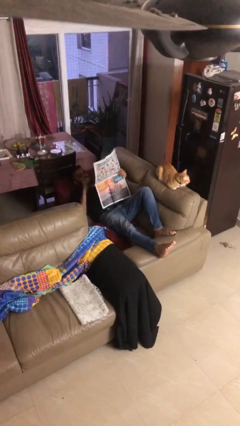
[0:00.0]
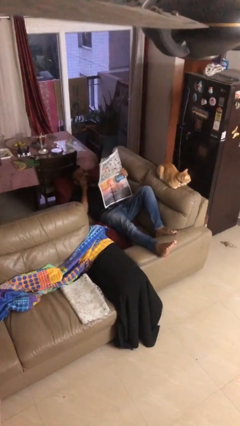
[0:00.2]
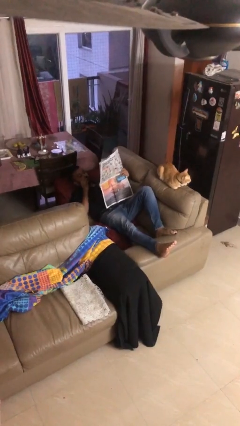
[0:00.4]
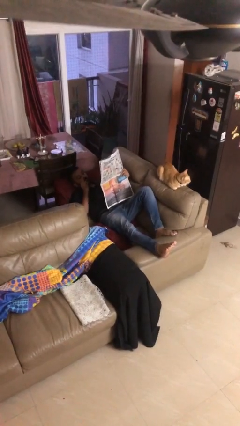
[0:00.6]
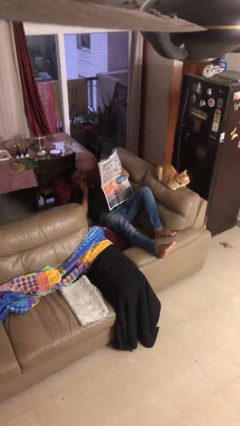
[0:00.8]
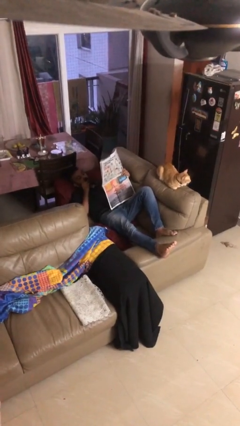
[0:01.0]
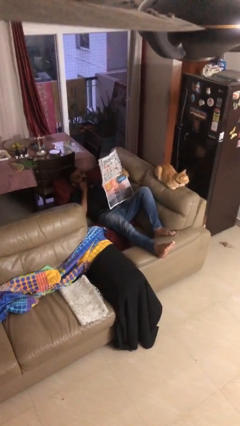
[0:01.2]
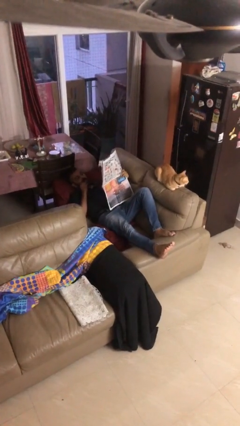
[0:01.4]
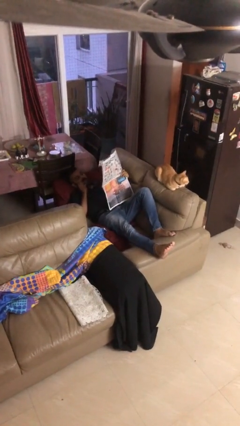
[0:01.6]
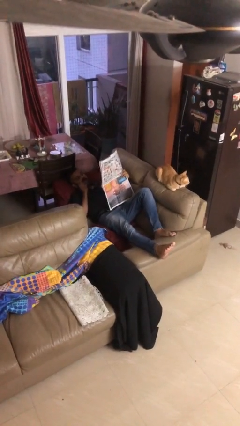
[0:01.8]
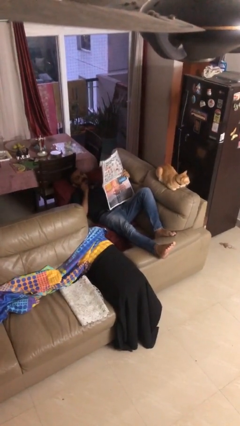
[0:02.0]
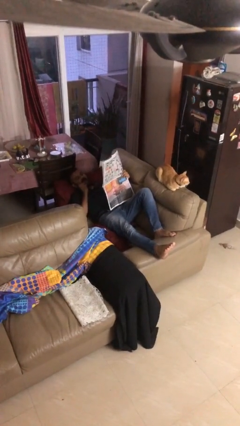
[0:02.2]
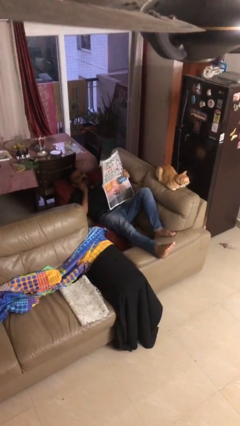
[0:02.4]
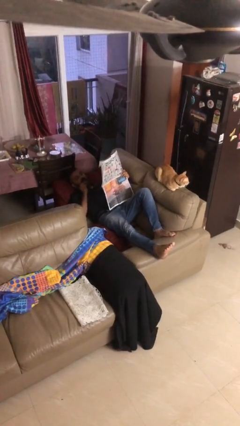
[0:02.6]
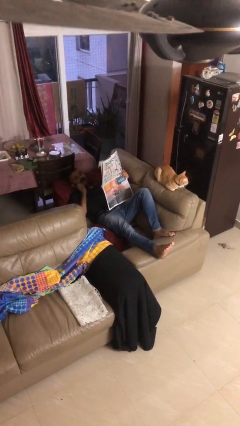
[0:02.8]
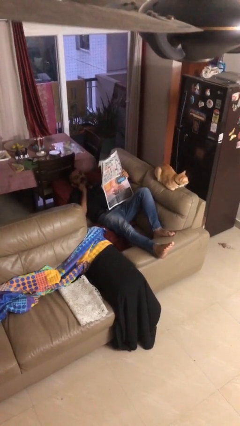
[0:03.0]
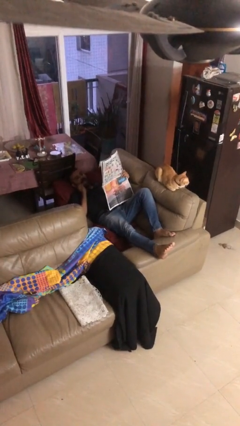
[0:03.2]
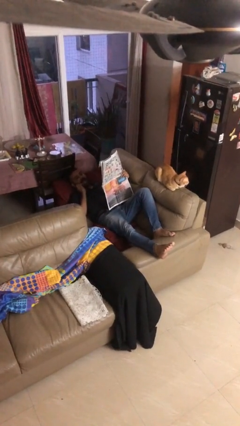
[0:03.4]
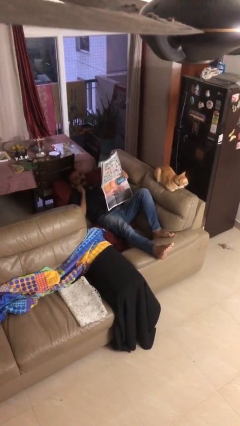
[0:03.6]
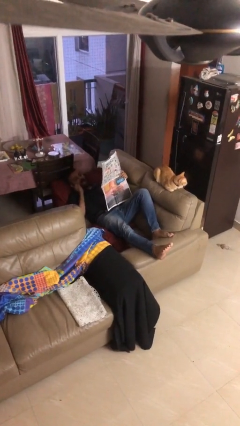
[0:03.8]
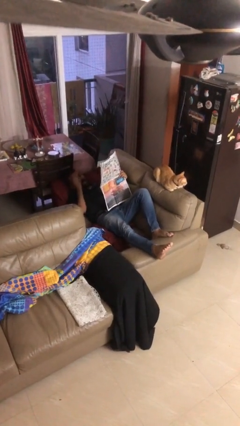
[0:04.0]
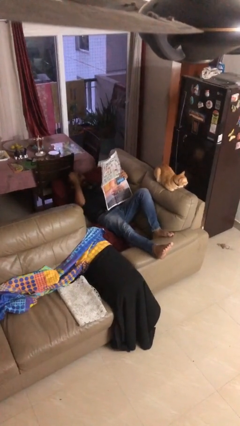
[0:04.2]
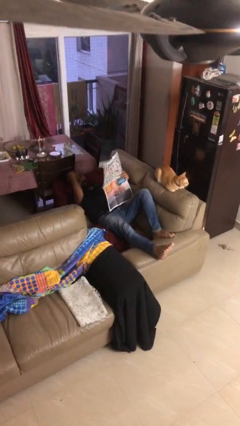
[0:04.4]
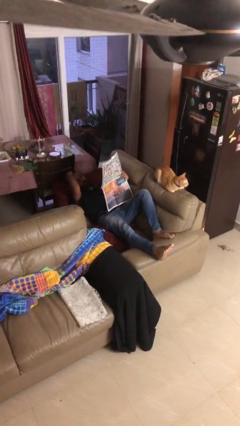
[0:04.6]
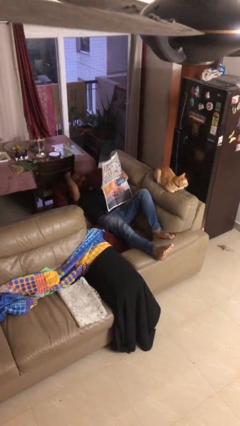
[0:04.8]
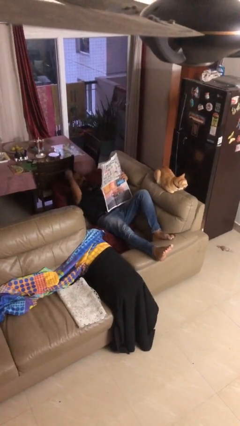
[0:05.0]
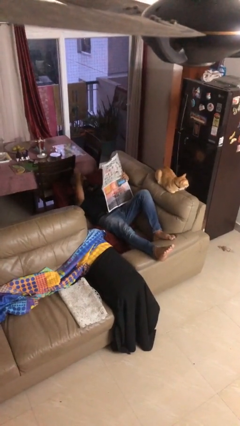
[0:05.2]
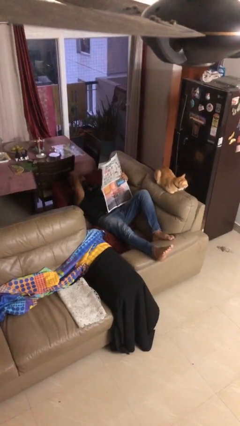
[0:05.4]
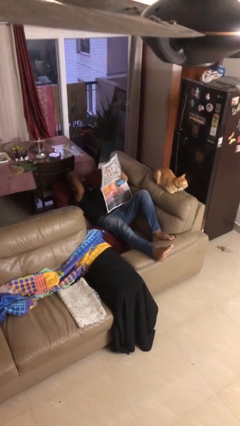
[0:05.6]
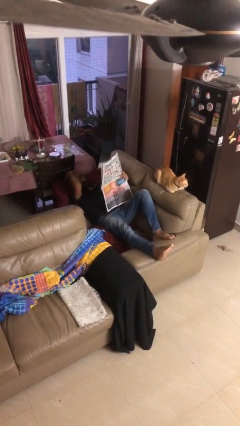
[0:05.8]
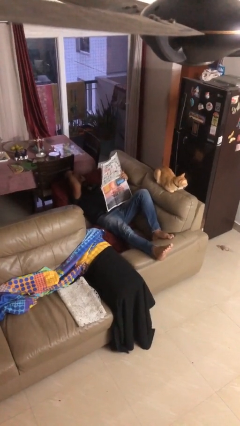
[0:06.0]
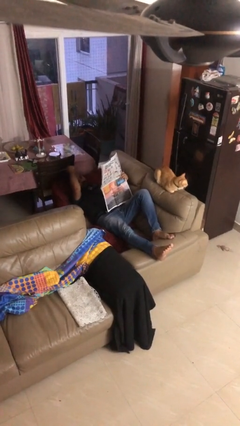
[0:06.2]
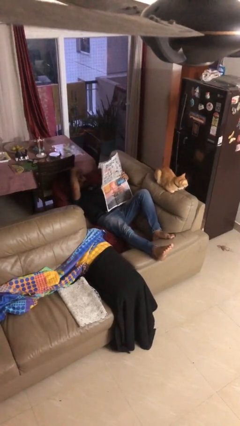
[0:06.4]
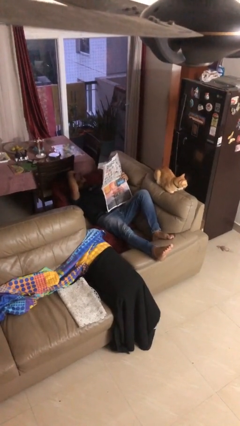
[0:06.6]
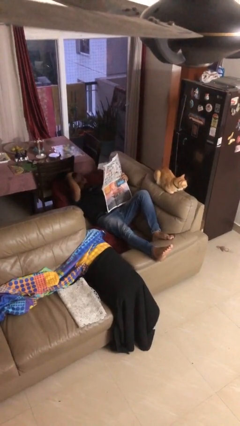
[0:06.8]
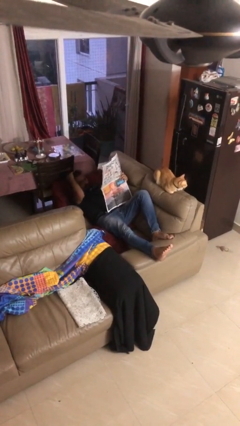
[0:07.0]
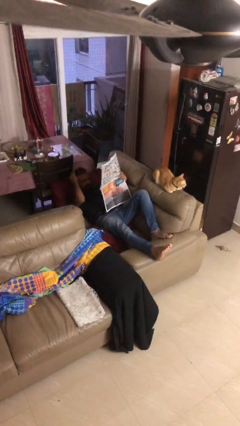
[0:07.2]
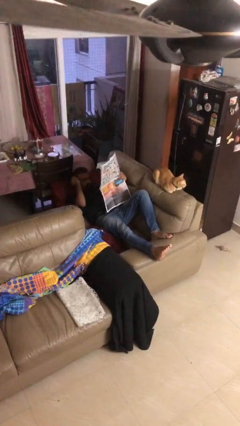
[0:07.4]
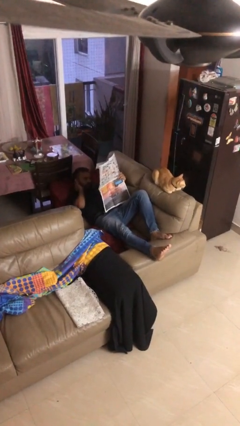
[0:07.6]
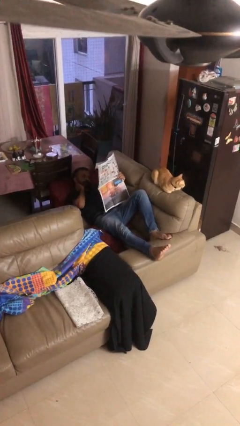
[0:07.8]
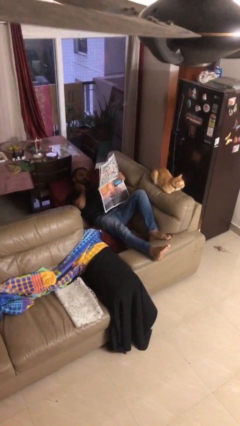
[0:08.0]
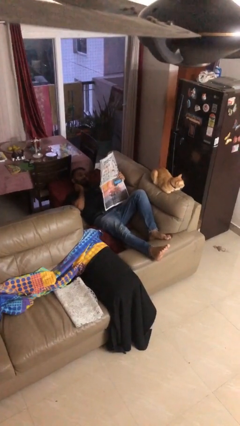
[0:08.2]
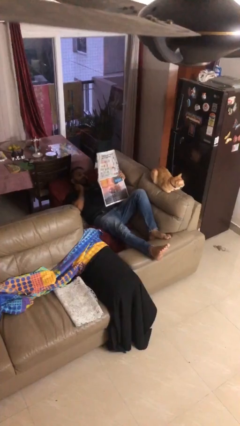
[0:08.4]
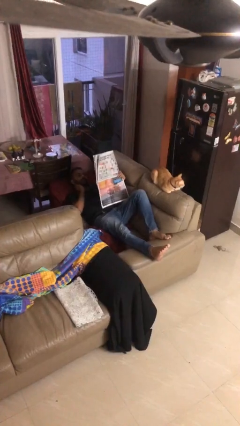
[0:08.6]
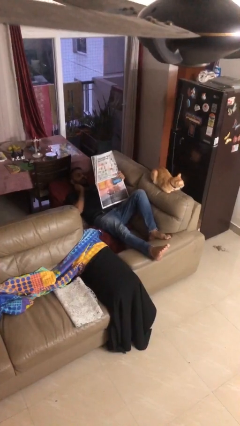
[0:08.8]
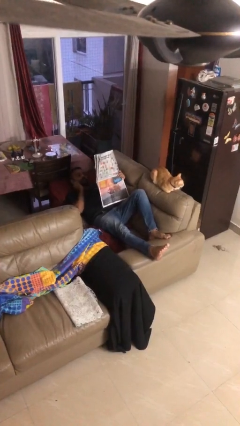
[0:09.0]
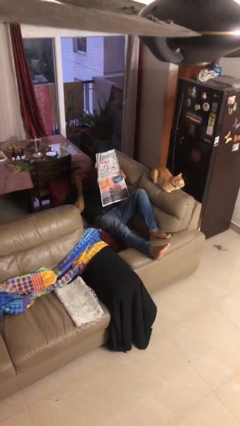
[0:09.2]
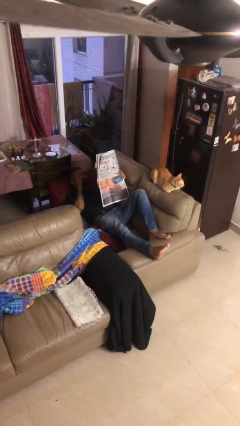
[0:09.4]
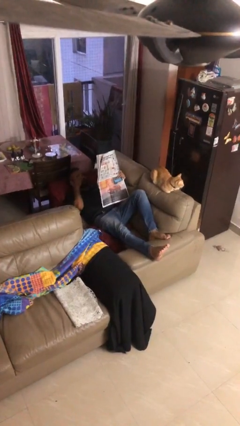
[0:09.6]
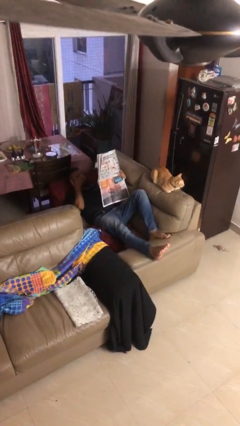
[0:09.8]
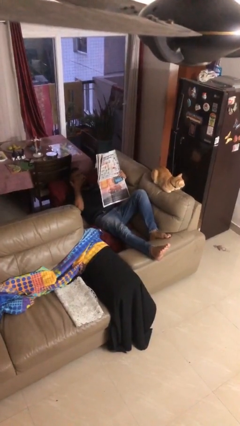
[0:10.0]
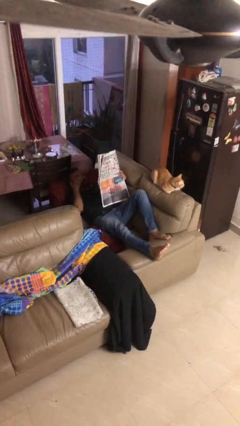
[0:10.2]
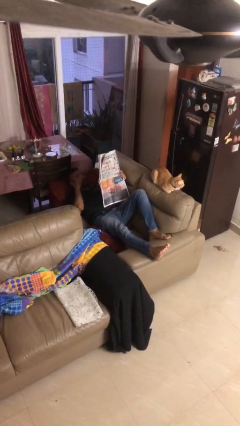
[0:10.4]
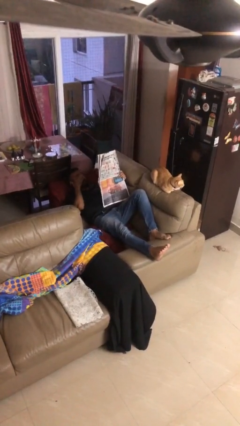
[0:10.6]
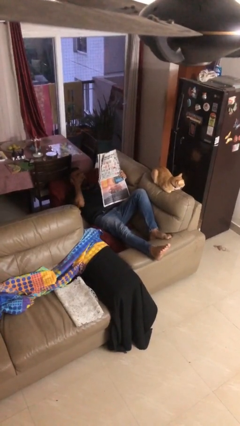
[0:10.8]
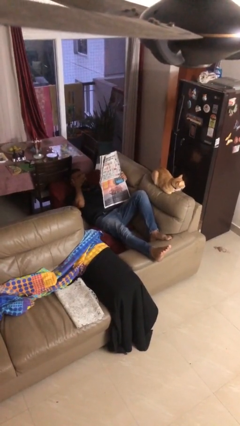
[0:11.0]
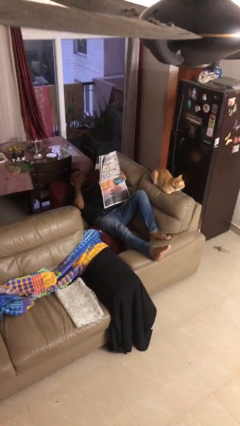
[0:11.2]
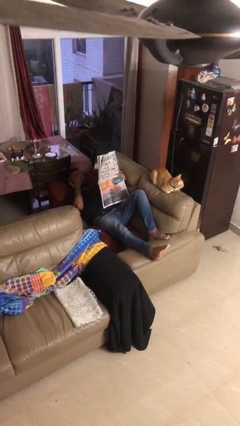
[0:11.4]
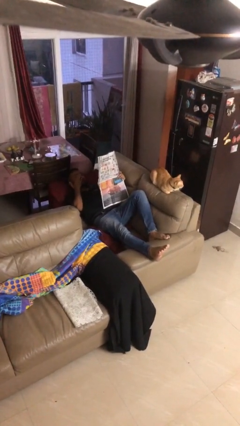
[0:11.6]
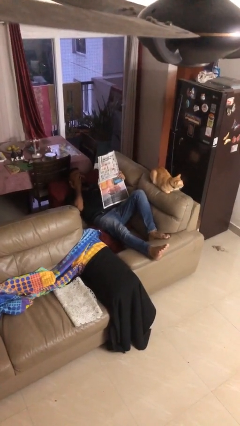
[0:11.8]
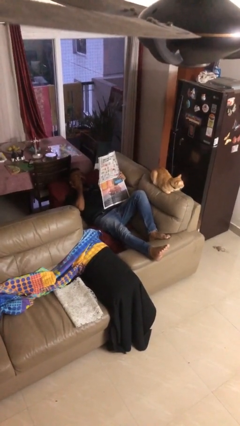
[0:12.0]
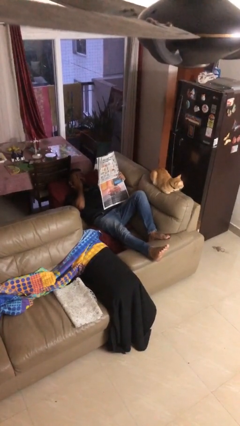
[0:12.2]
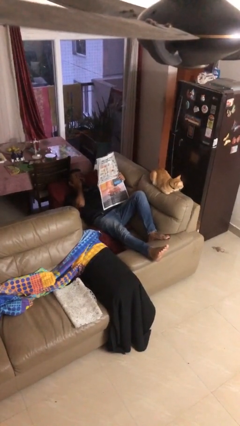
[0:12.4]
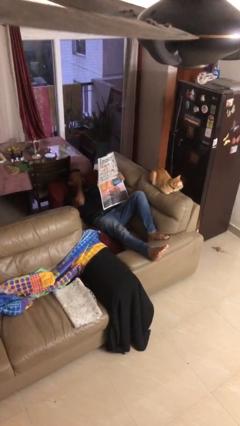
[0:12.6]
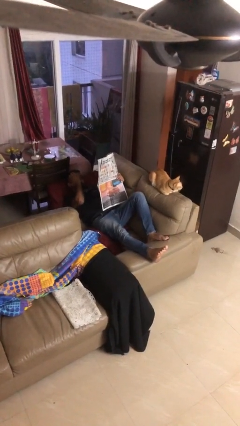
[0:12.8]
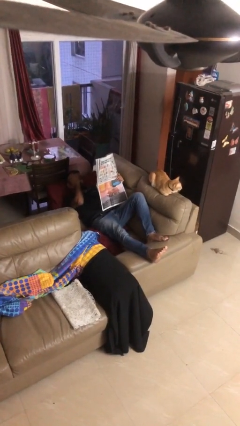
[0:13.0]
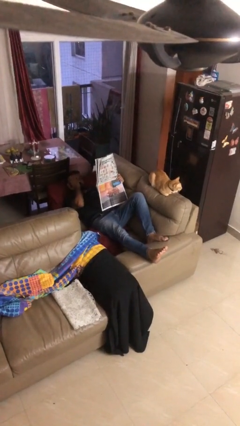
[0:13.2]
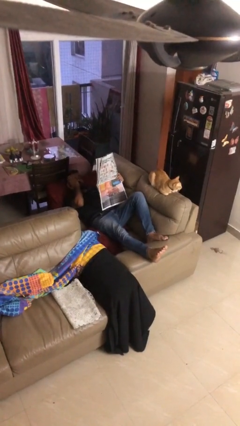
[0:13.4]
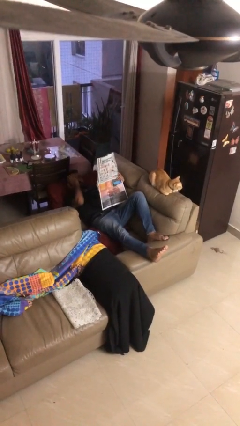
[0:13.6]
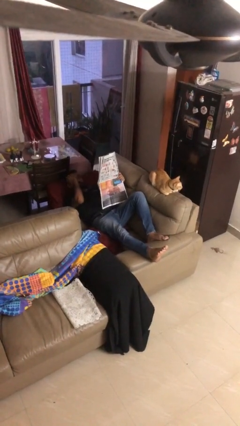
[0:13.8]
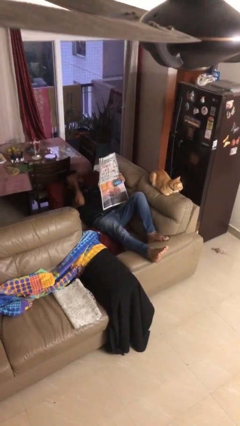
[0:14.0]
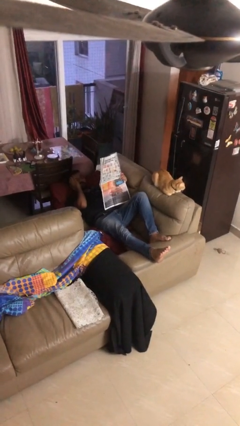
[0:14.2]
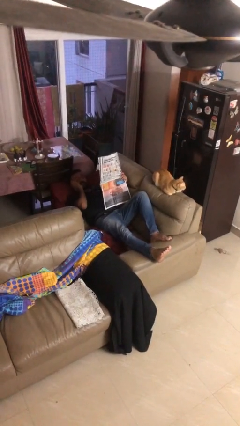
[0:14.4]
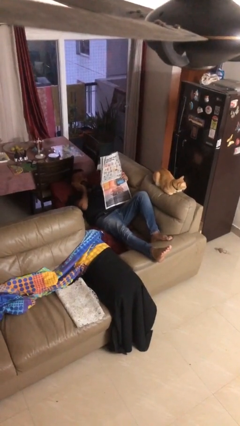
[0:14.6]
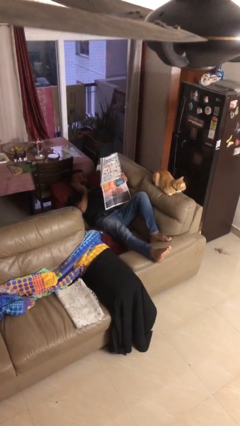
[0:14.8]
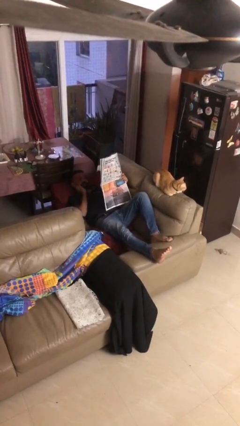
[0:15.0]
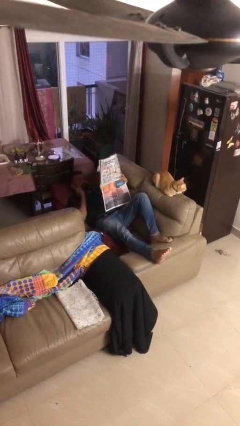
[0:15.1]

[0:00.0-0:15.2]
person reads document

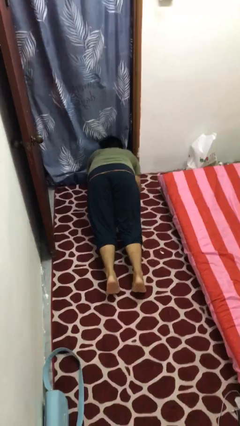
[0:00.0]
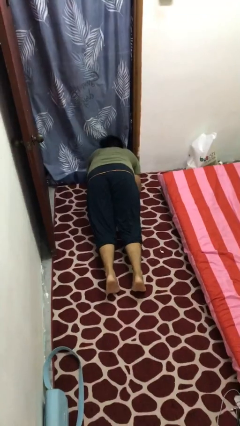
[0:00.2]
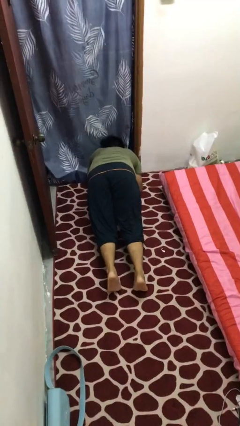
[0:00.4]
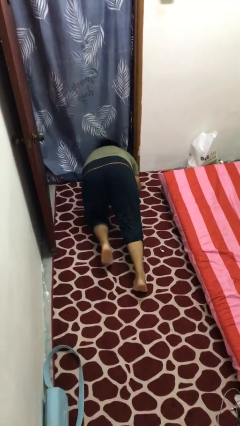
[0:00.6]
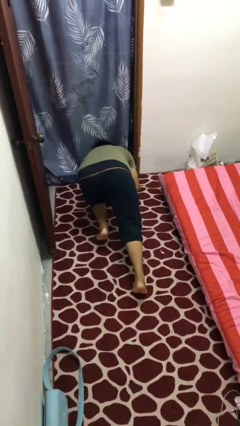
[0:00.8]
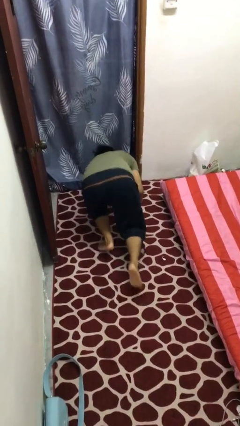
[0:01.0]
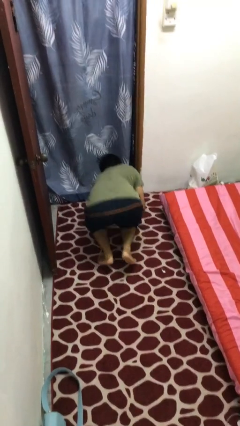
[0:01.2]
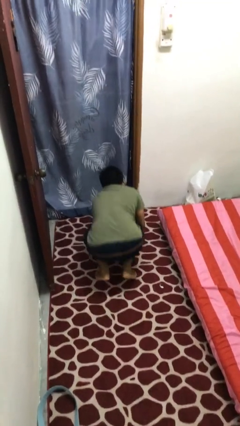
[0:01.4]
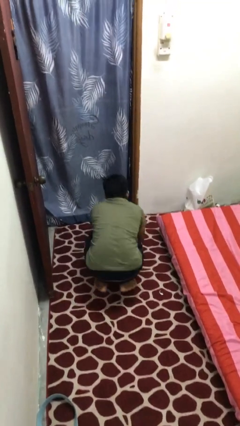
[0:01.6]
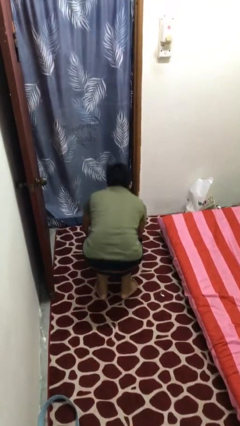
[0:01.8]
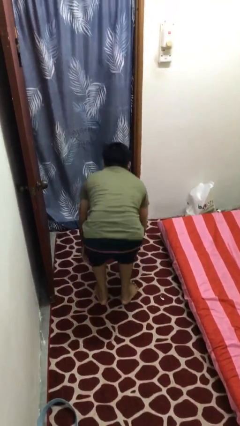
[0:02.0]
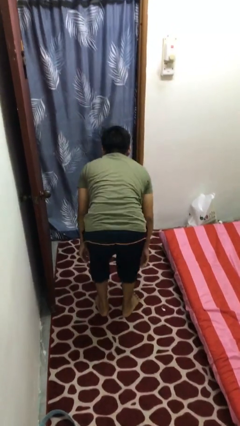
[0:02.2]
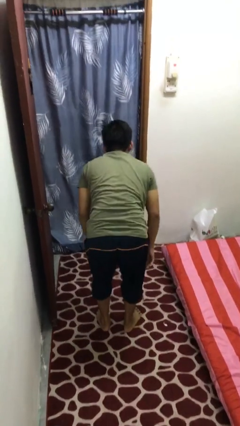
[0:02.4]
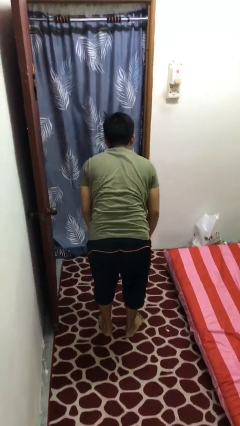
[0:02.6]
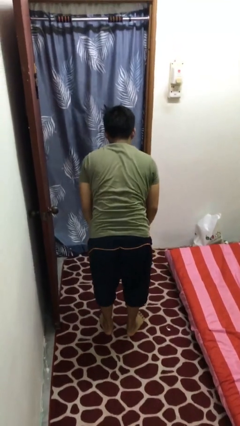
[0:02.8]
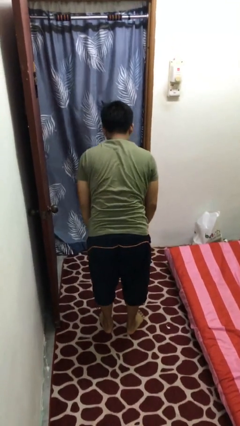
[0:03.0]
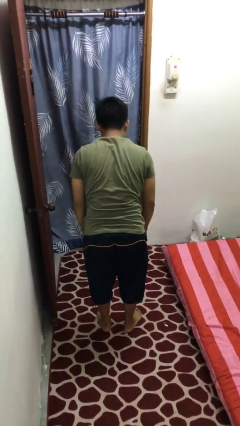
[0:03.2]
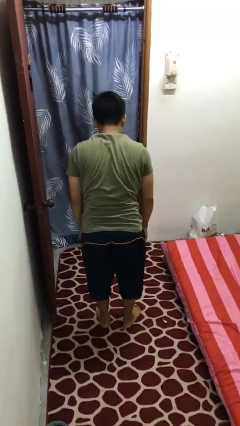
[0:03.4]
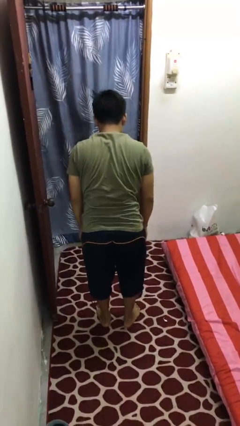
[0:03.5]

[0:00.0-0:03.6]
person stands up from floor
